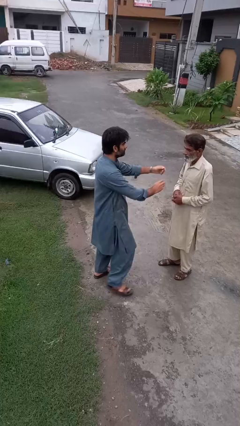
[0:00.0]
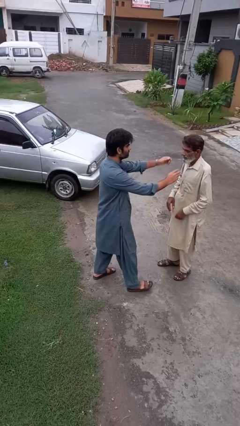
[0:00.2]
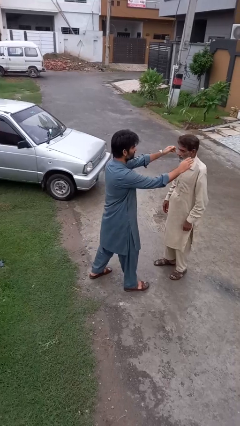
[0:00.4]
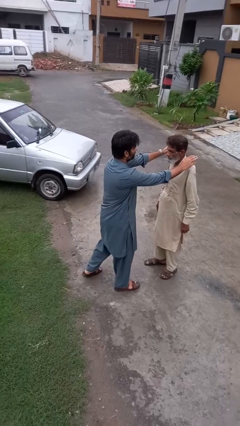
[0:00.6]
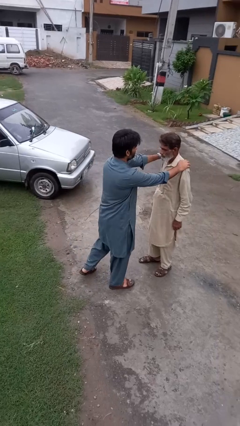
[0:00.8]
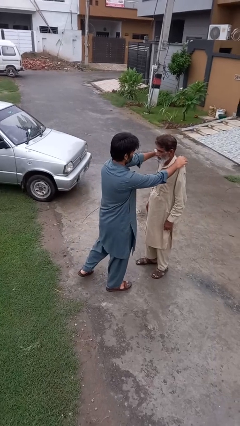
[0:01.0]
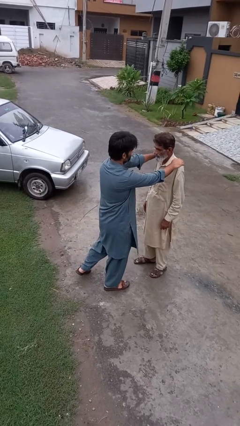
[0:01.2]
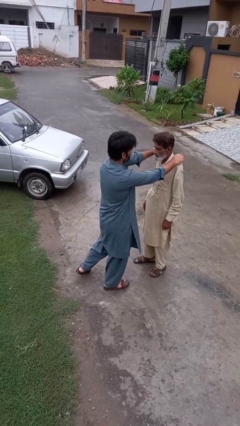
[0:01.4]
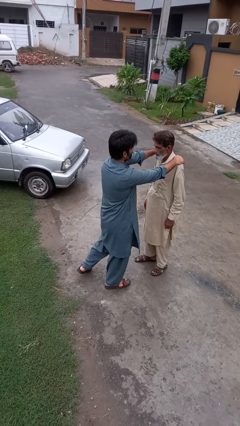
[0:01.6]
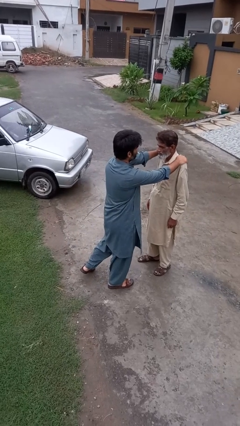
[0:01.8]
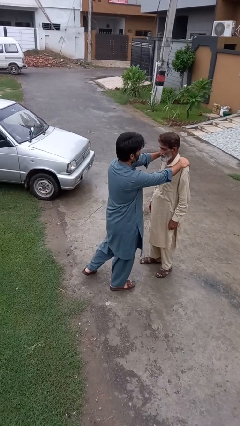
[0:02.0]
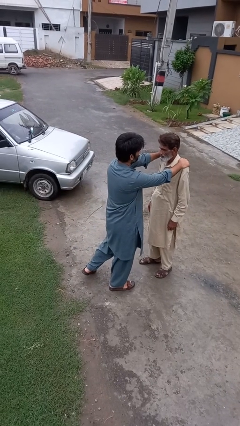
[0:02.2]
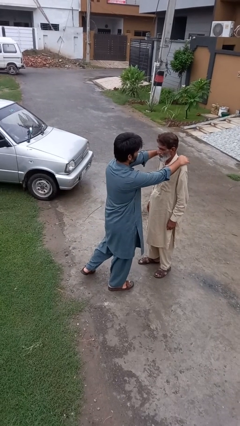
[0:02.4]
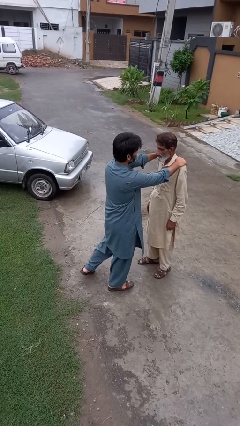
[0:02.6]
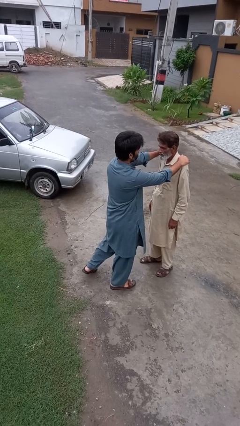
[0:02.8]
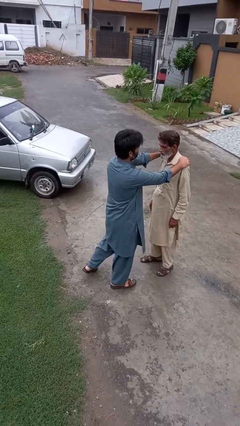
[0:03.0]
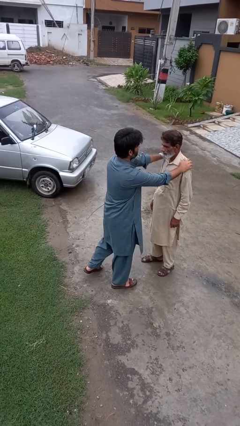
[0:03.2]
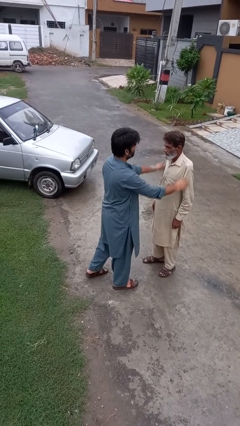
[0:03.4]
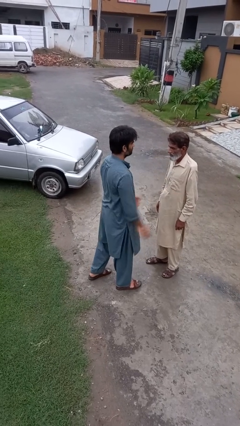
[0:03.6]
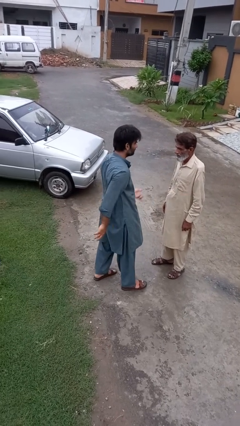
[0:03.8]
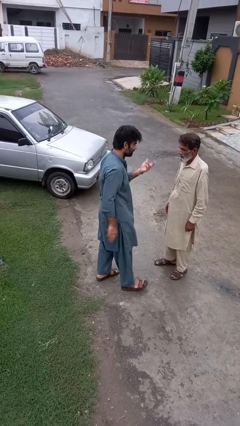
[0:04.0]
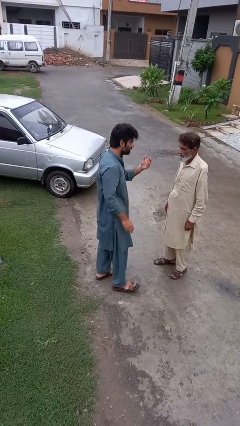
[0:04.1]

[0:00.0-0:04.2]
person pounds shoulders of person

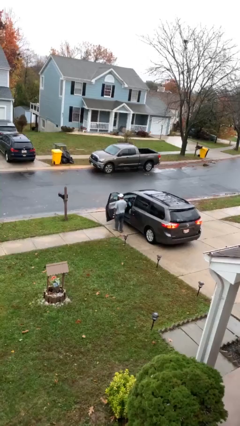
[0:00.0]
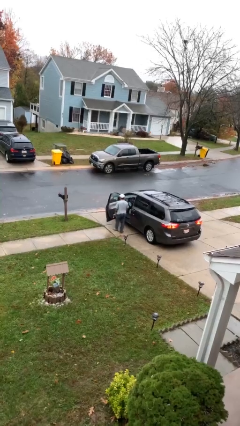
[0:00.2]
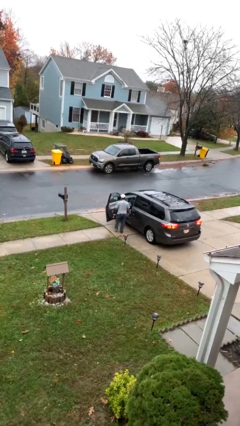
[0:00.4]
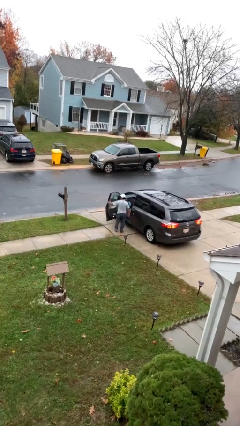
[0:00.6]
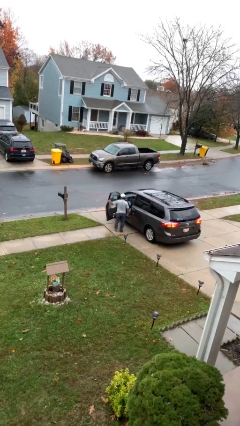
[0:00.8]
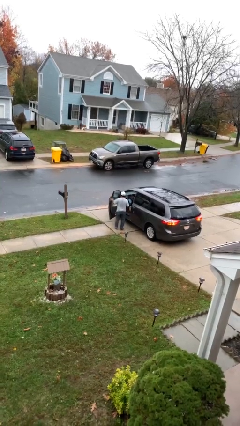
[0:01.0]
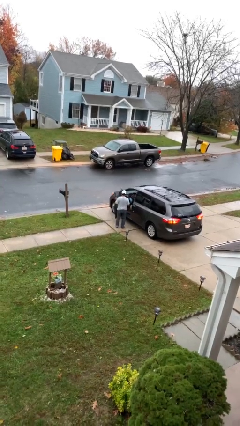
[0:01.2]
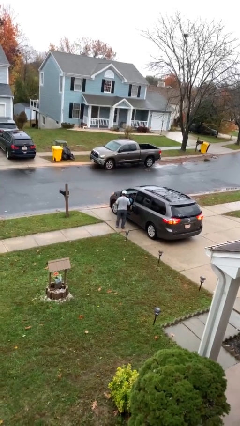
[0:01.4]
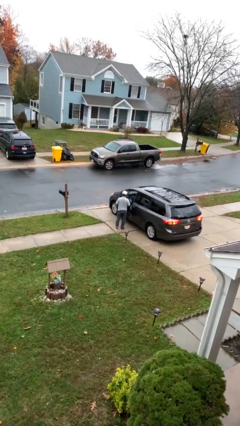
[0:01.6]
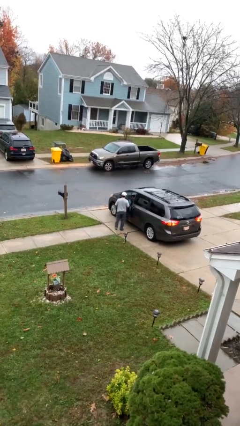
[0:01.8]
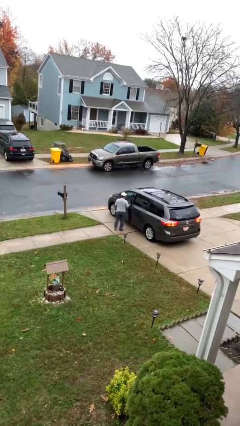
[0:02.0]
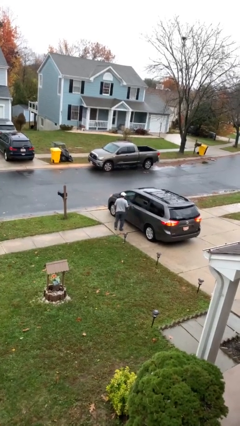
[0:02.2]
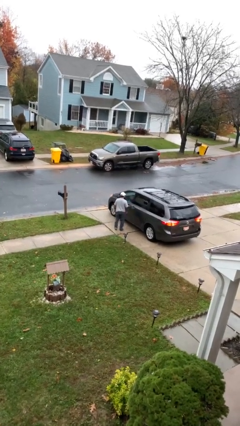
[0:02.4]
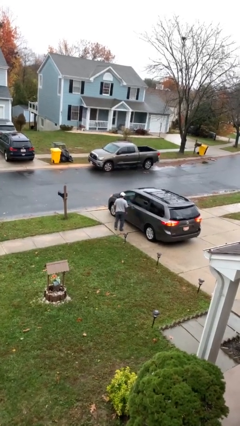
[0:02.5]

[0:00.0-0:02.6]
person closes car door

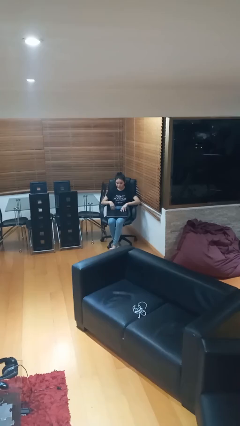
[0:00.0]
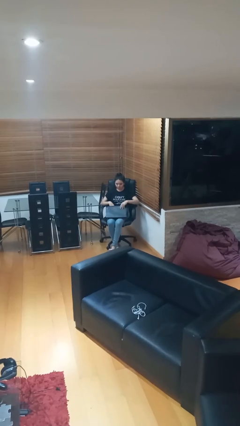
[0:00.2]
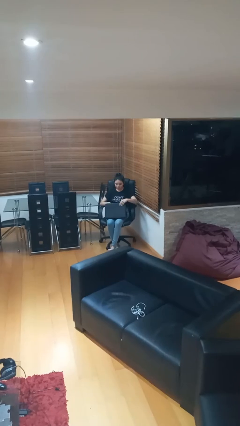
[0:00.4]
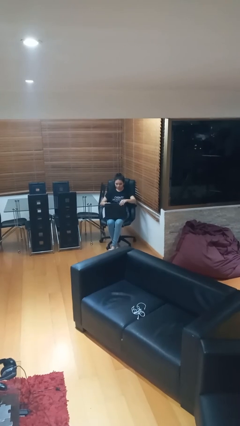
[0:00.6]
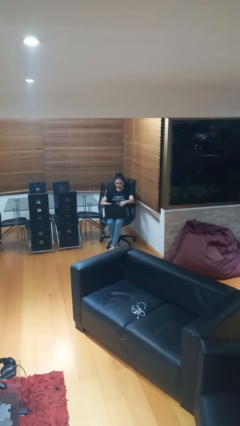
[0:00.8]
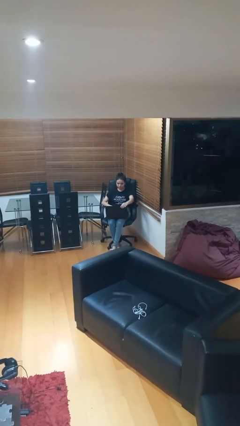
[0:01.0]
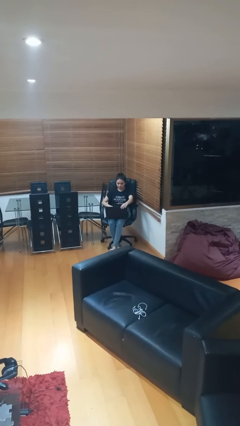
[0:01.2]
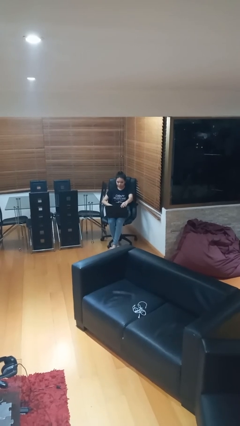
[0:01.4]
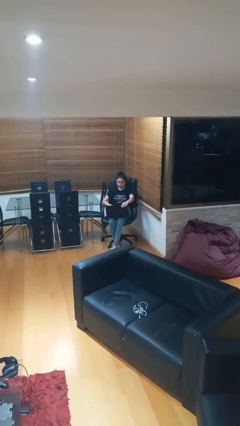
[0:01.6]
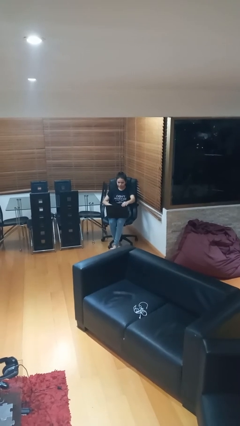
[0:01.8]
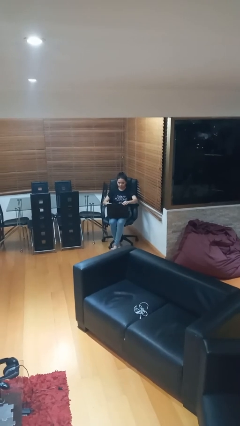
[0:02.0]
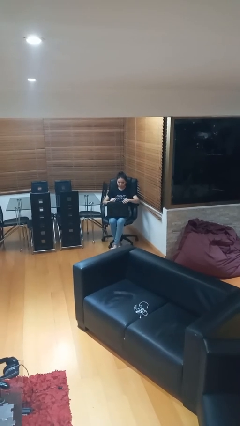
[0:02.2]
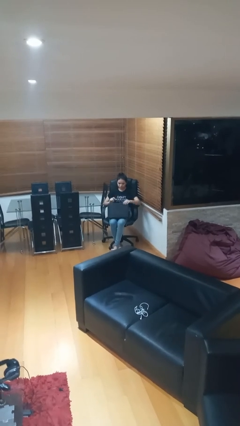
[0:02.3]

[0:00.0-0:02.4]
person interacts with laptop

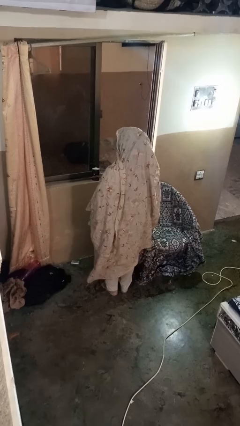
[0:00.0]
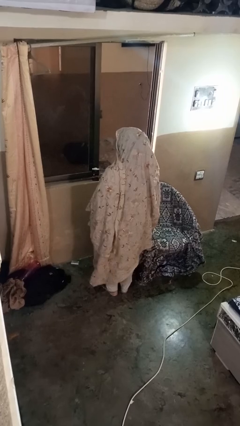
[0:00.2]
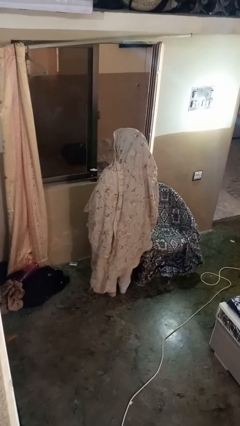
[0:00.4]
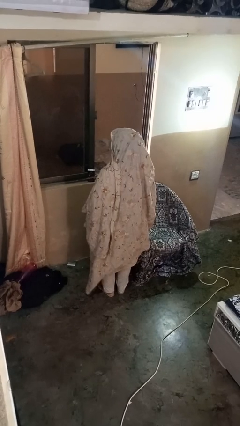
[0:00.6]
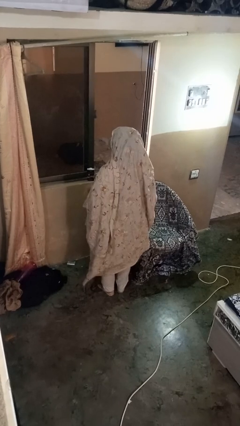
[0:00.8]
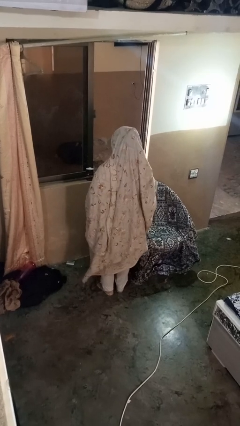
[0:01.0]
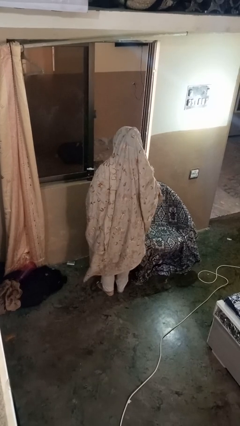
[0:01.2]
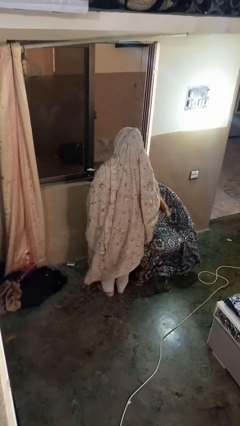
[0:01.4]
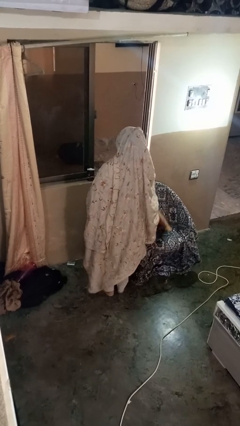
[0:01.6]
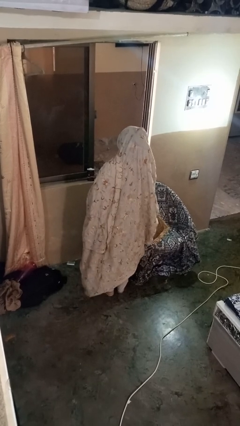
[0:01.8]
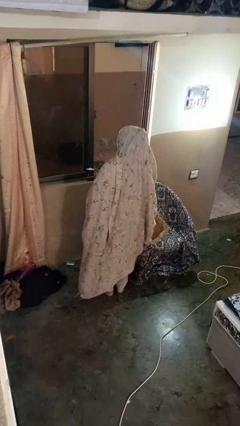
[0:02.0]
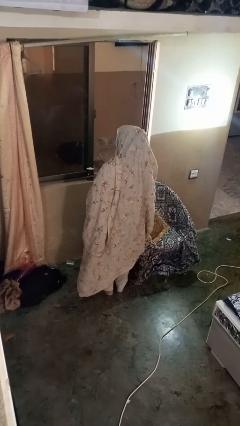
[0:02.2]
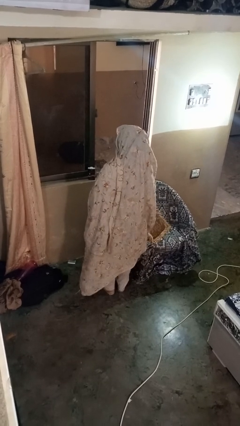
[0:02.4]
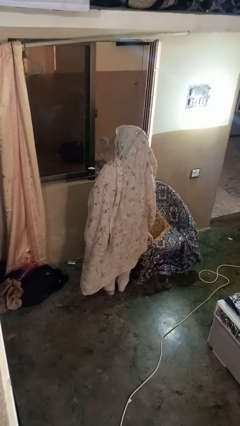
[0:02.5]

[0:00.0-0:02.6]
person puts down object on couch

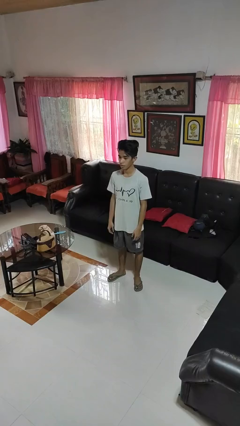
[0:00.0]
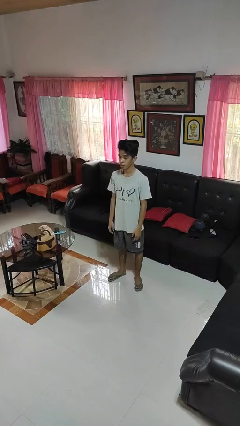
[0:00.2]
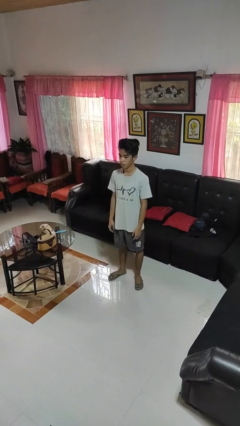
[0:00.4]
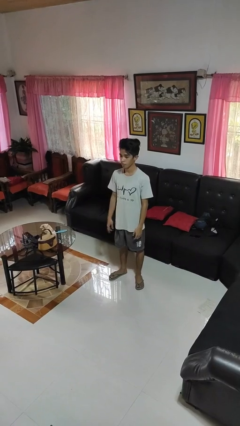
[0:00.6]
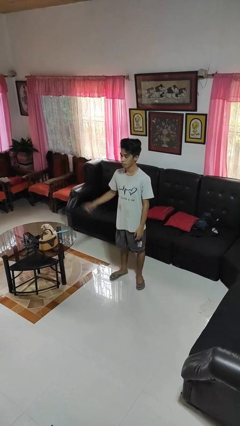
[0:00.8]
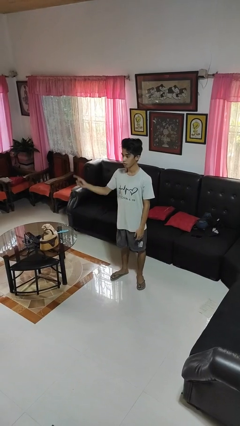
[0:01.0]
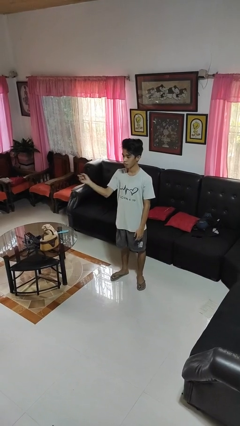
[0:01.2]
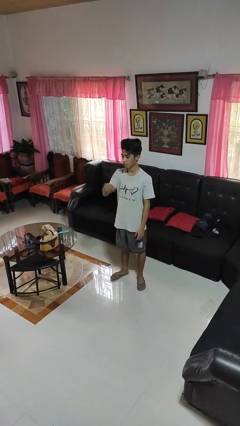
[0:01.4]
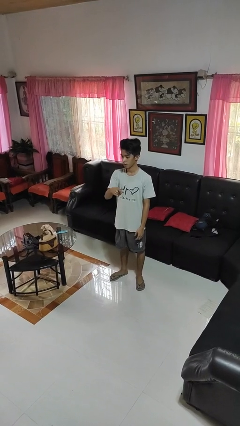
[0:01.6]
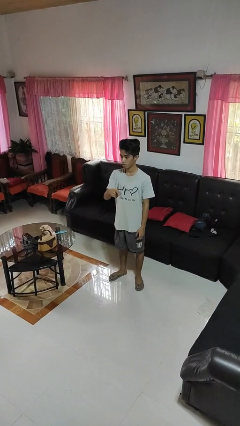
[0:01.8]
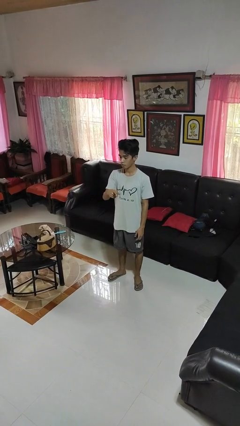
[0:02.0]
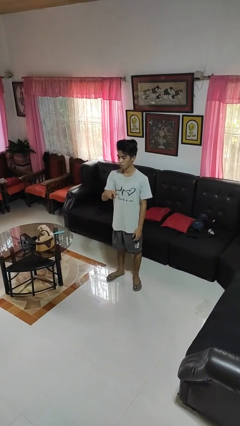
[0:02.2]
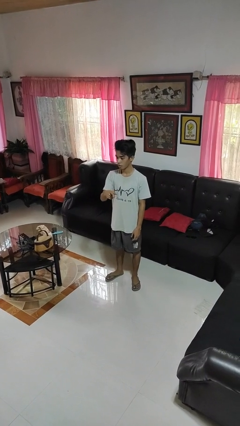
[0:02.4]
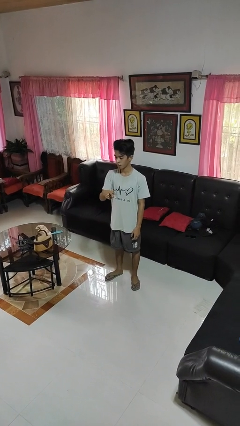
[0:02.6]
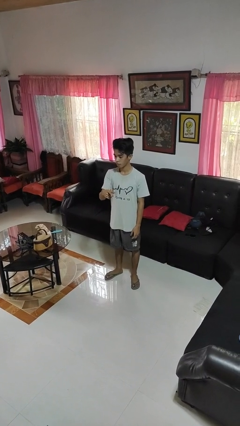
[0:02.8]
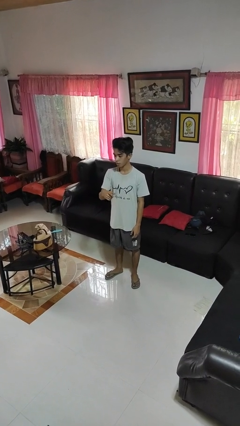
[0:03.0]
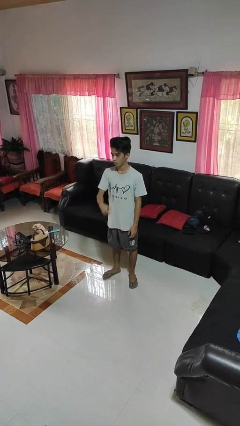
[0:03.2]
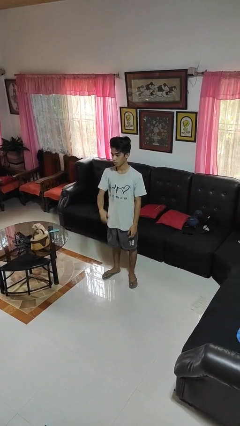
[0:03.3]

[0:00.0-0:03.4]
person gestures swipe left

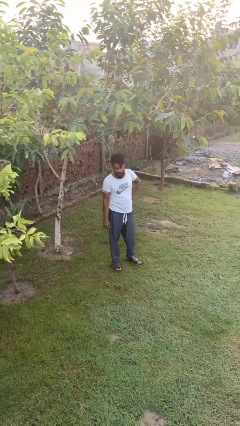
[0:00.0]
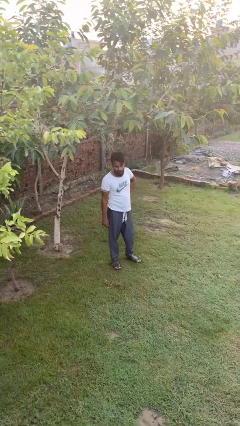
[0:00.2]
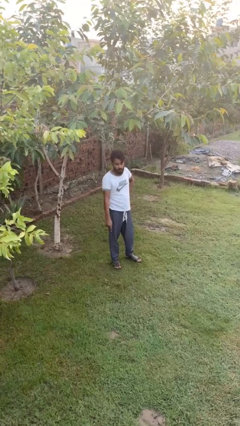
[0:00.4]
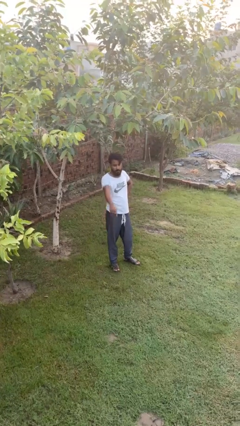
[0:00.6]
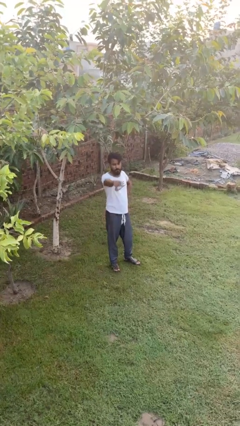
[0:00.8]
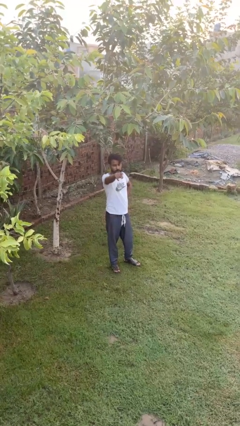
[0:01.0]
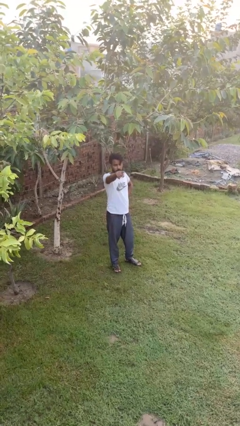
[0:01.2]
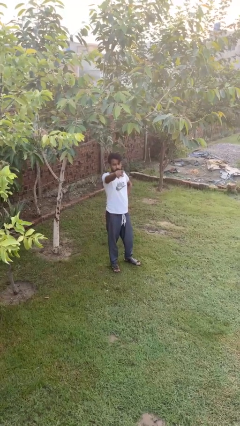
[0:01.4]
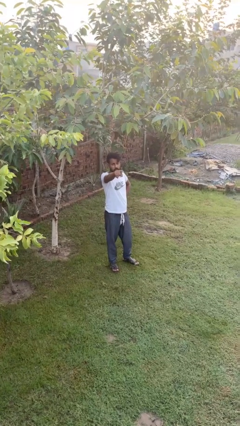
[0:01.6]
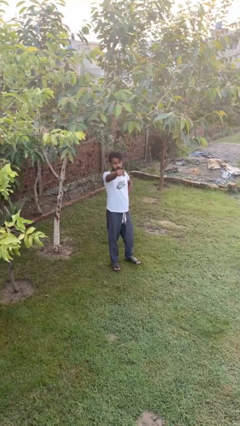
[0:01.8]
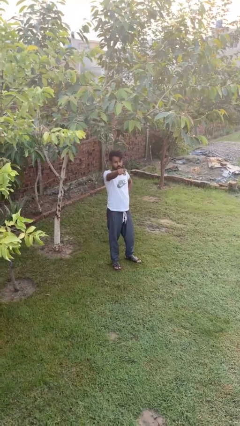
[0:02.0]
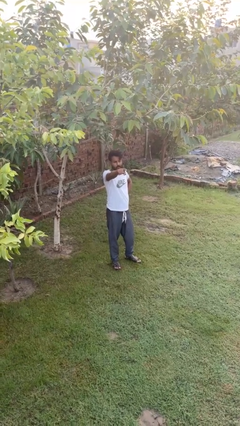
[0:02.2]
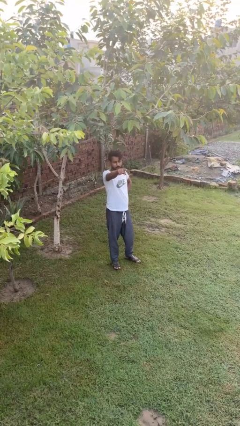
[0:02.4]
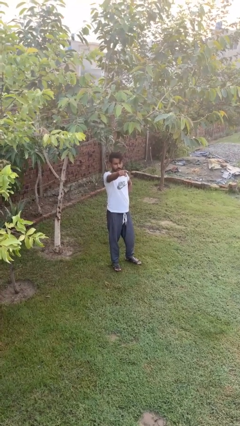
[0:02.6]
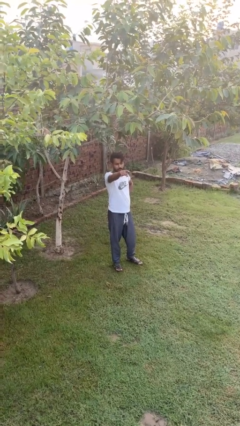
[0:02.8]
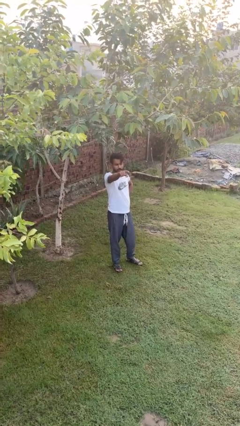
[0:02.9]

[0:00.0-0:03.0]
person points at person
